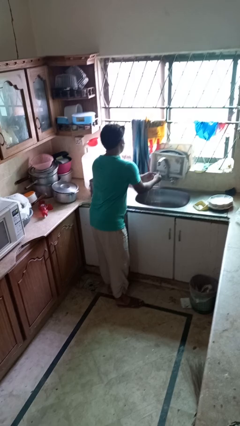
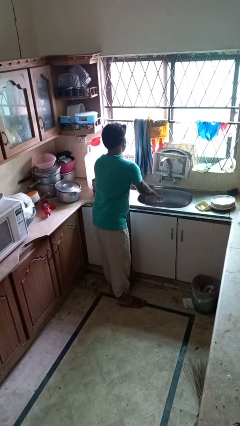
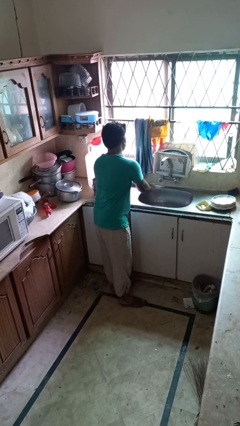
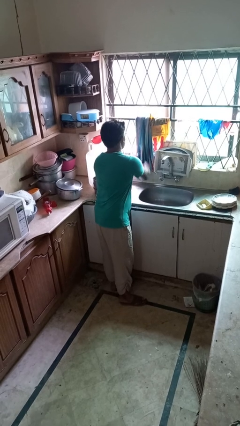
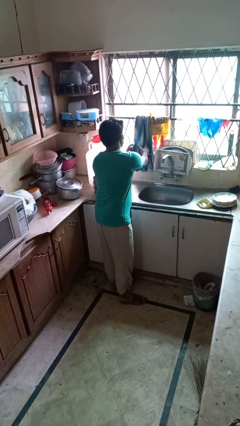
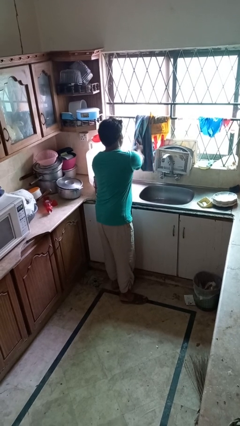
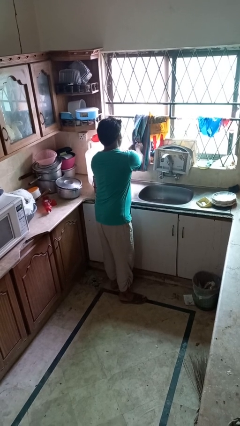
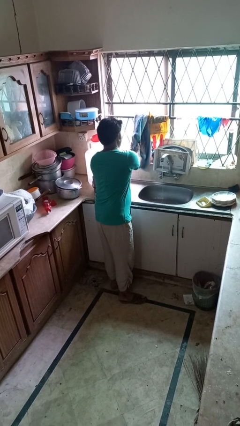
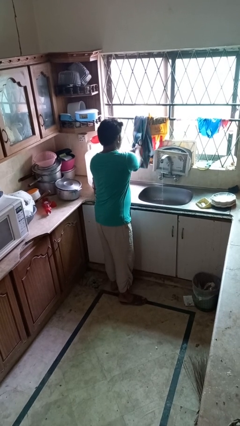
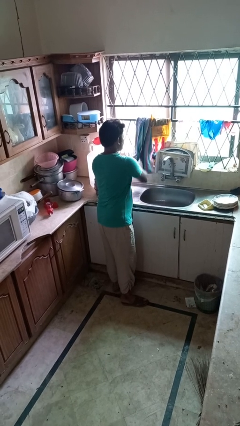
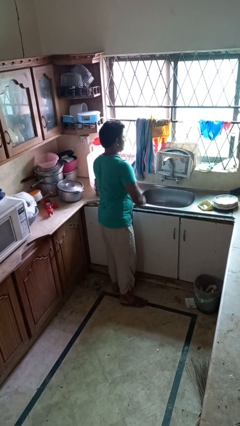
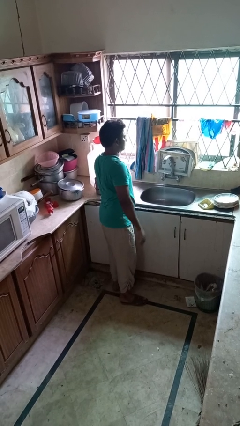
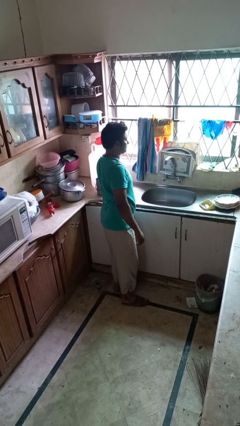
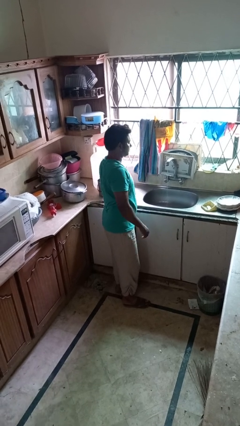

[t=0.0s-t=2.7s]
person dries hands with towel

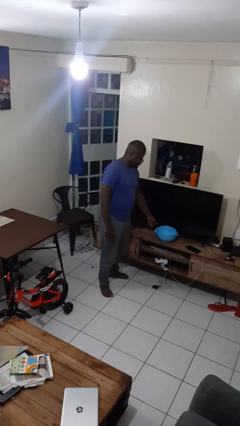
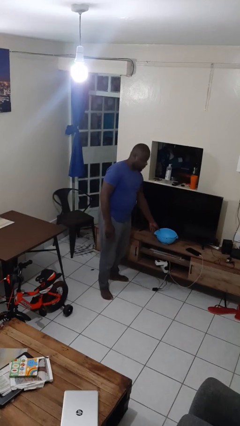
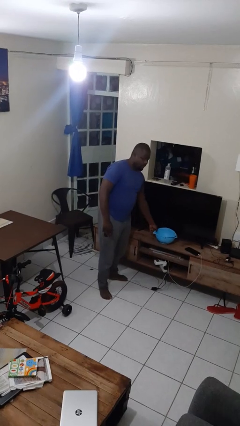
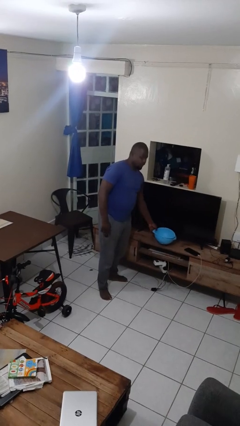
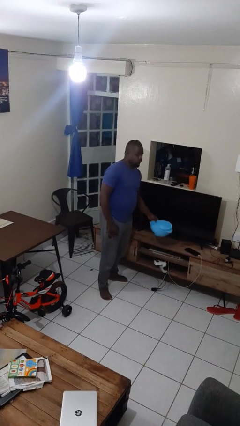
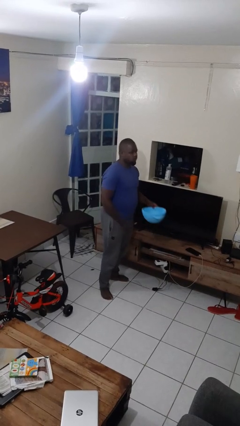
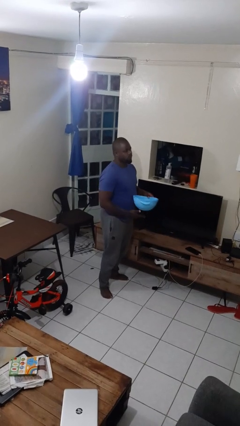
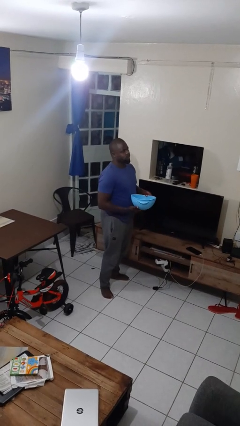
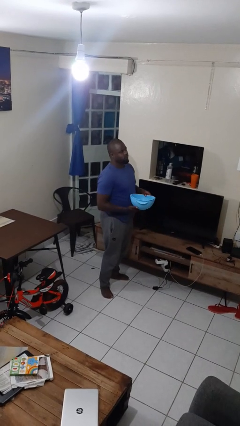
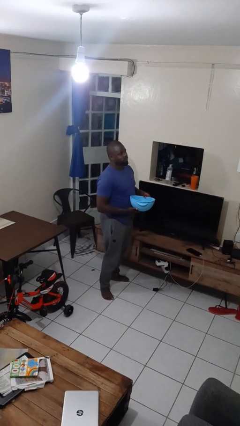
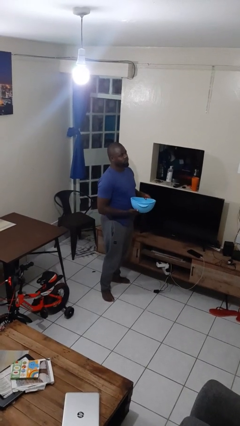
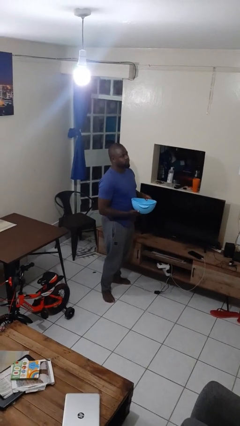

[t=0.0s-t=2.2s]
person picks up object from countertop

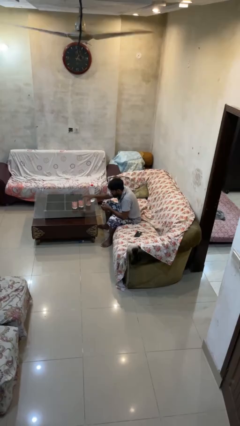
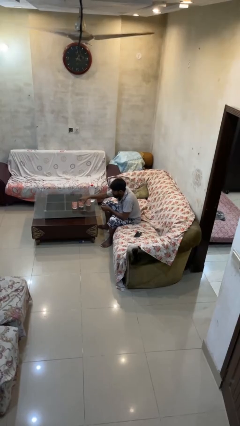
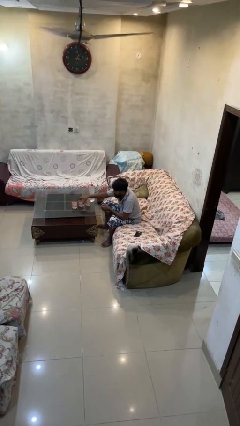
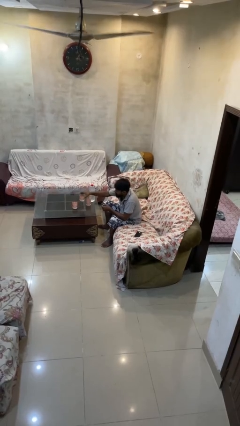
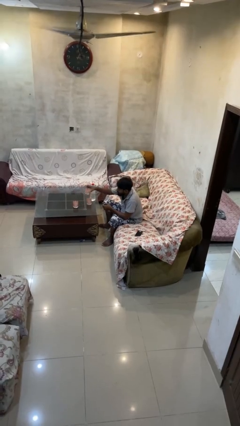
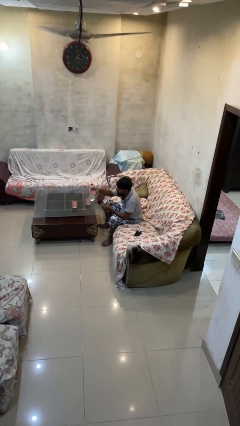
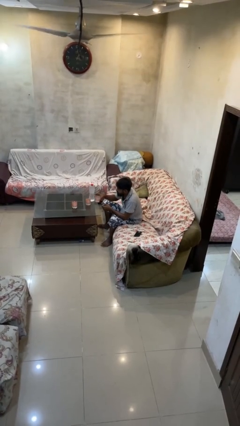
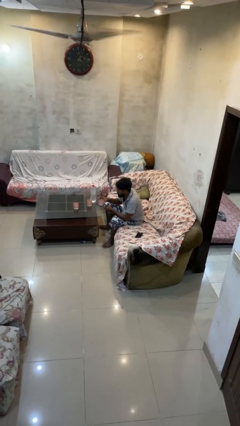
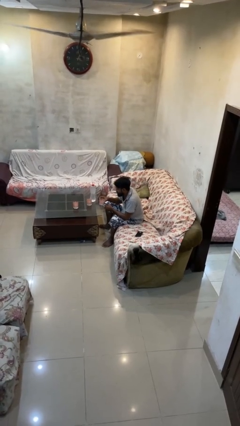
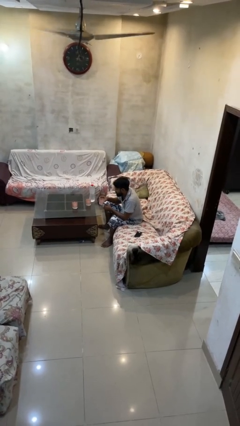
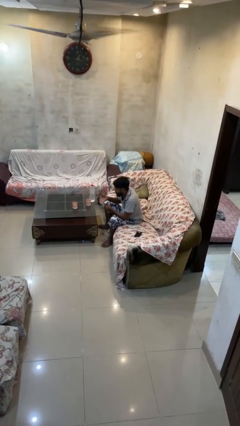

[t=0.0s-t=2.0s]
person picks up object from table

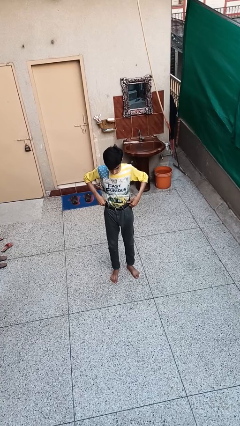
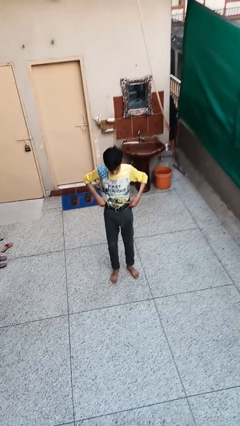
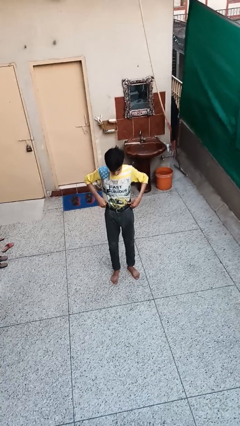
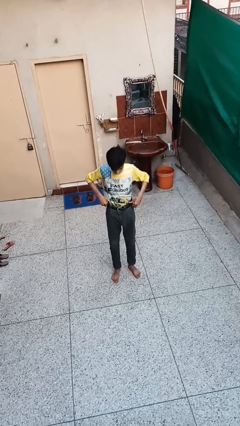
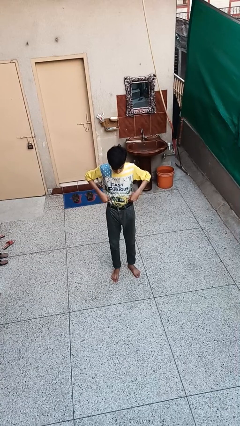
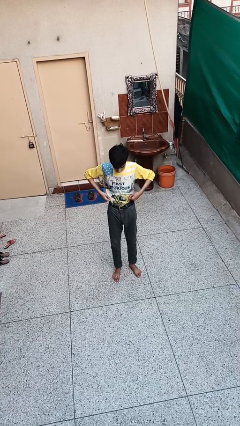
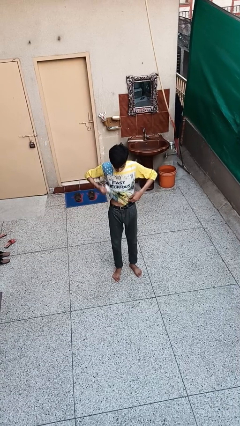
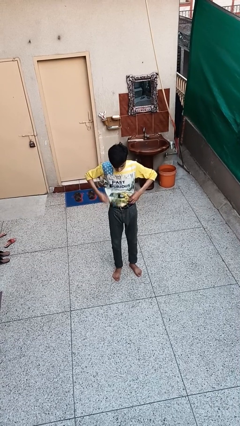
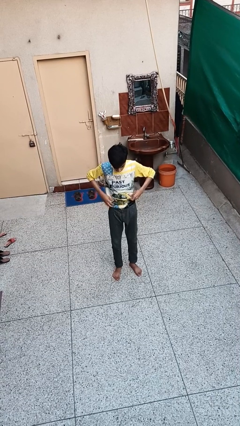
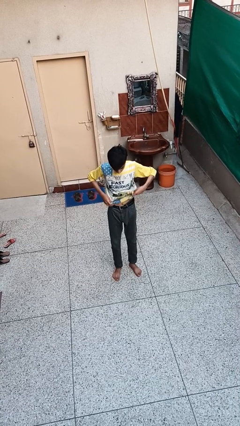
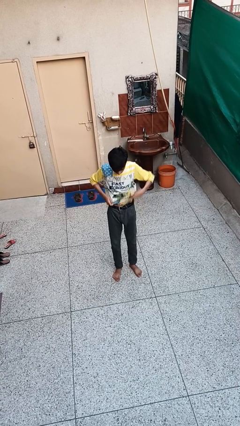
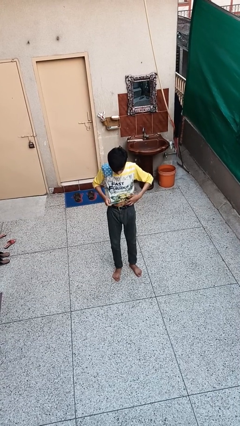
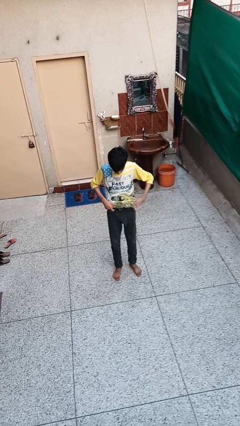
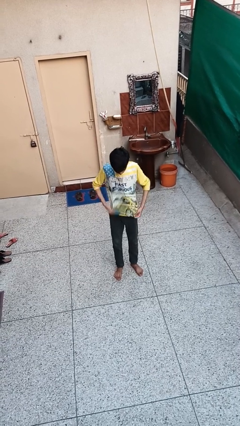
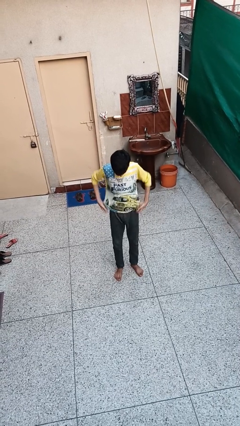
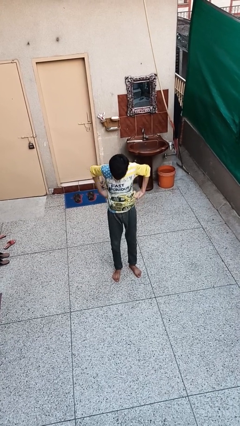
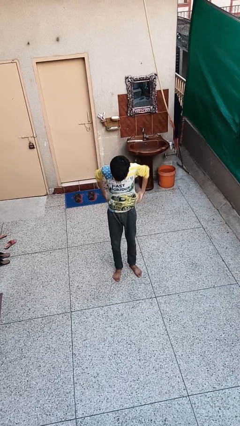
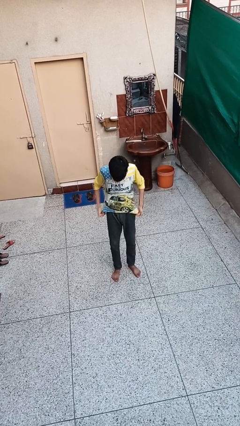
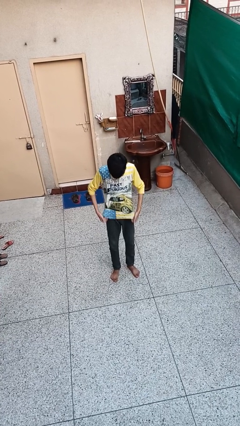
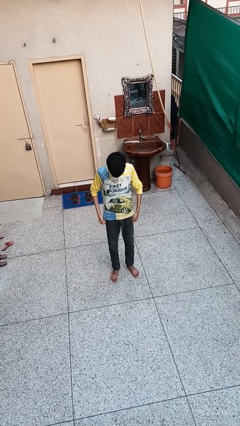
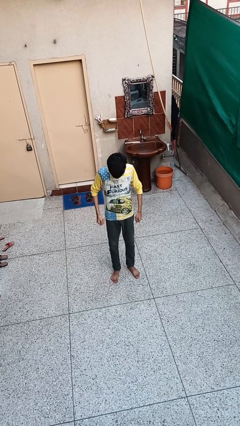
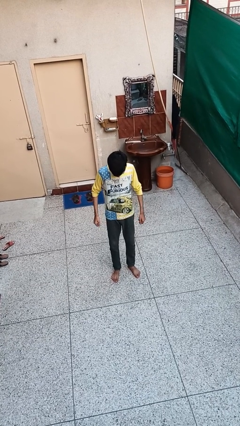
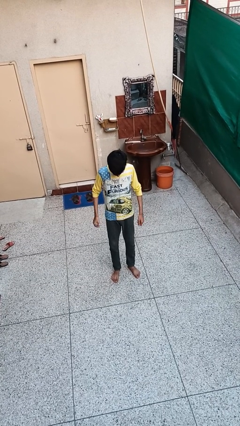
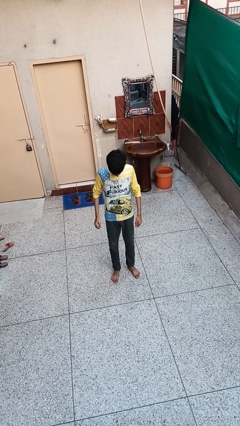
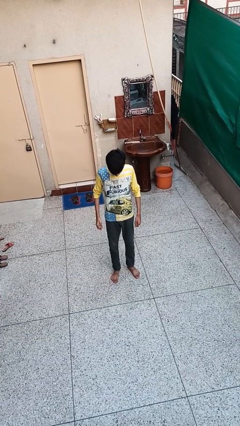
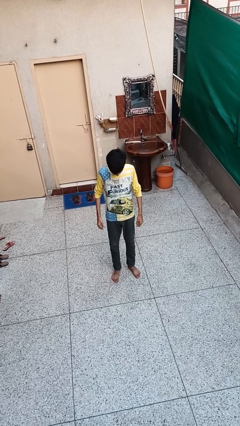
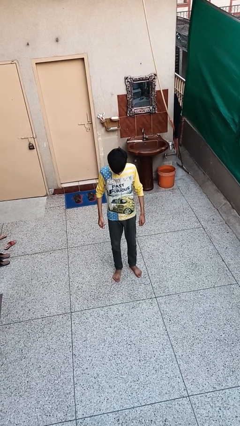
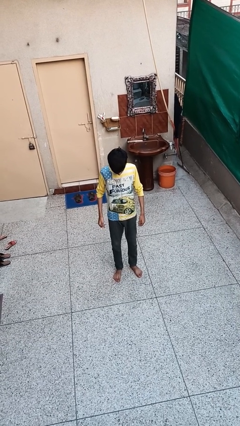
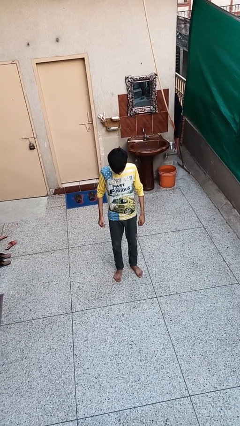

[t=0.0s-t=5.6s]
person untucks shirt

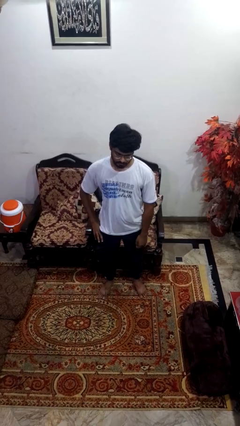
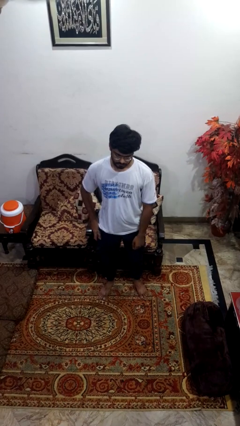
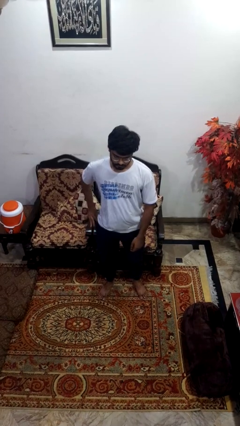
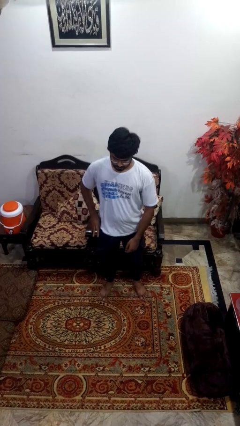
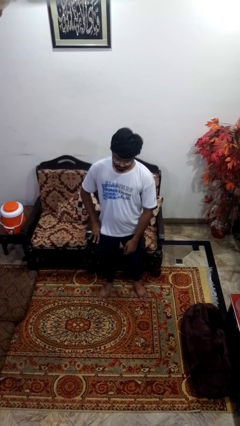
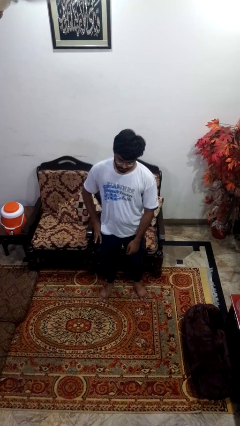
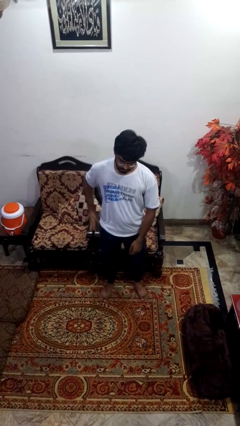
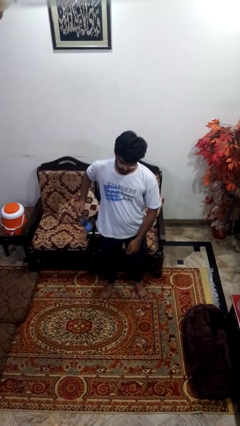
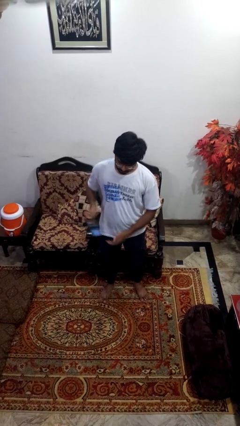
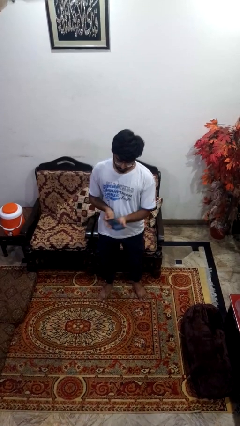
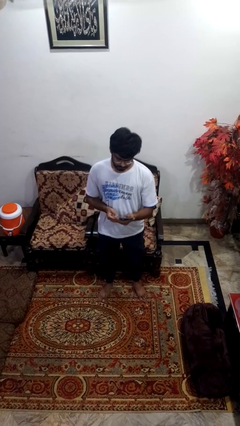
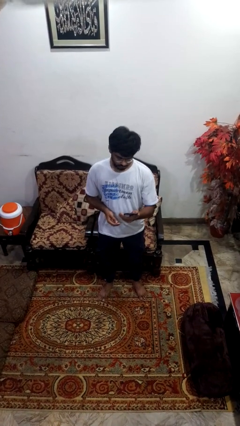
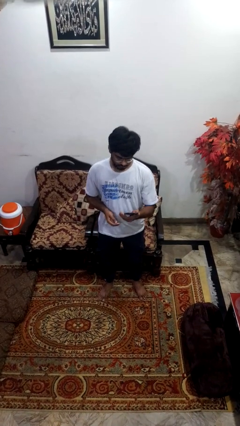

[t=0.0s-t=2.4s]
person takes phone from pocket

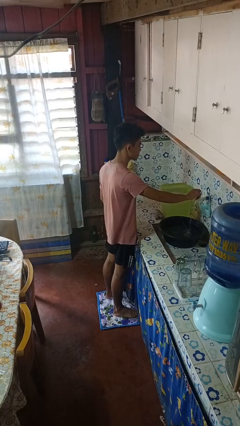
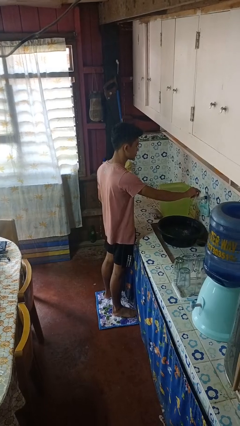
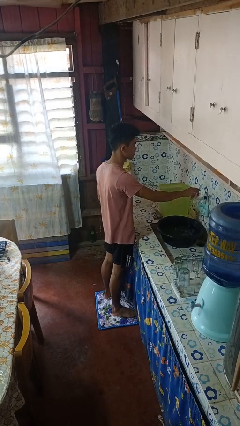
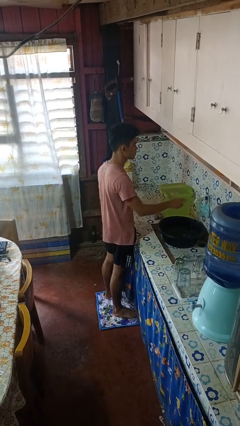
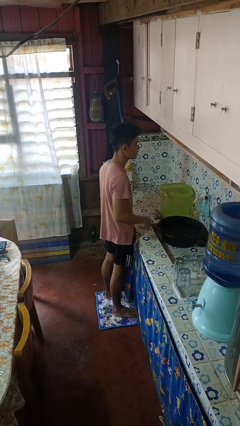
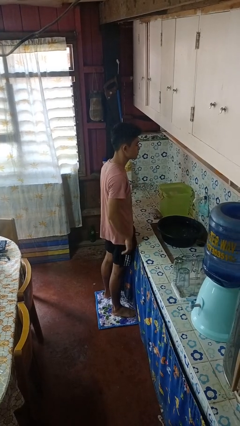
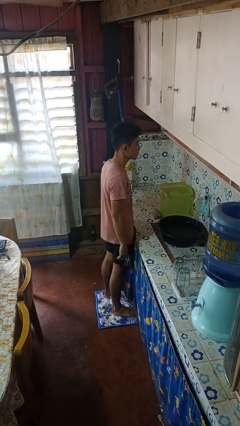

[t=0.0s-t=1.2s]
person turns off faucet

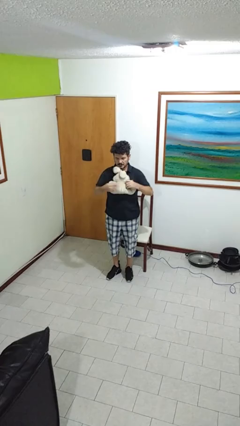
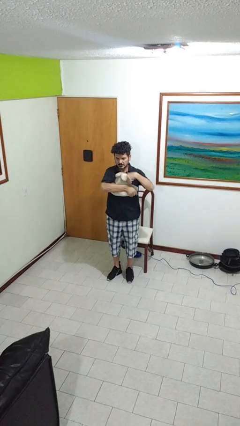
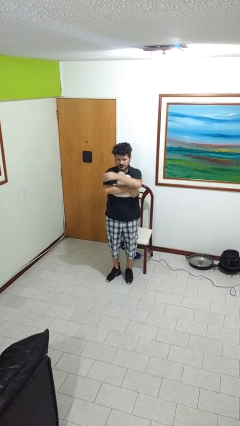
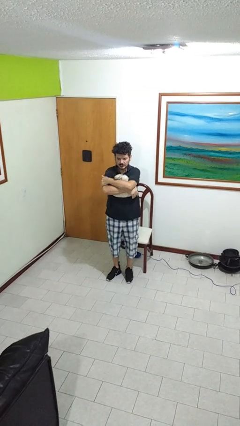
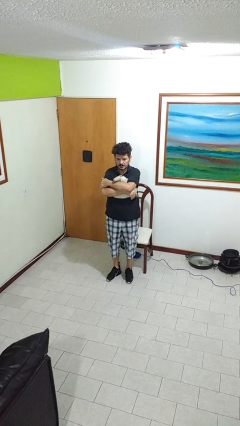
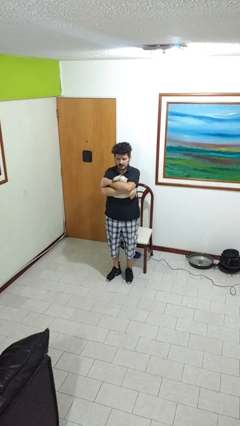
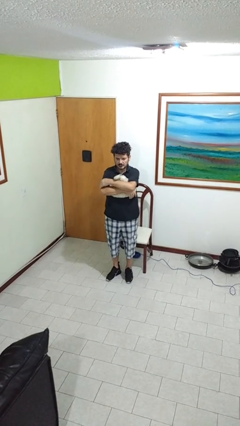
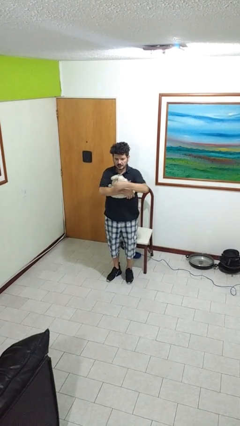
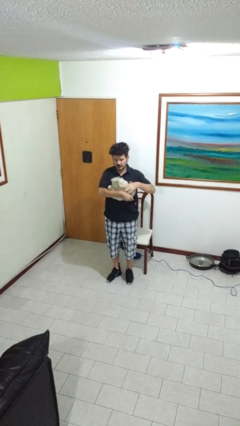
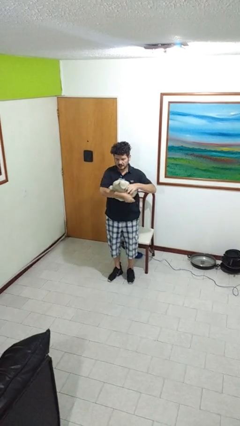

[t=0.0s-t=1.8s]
person hugs stuffed animal
